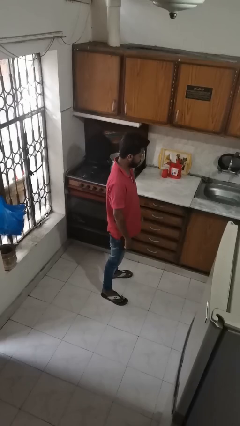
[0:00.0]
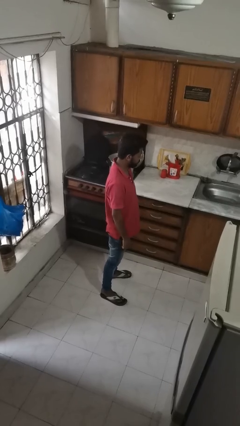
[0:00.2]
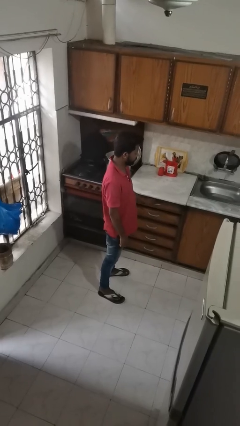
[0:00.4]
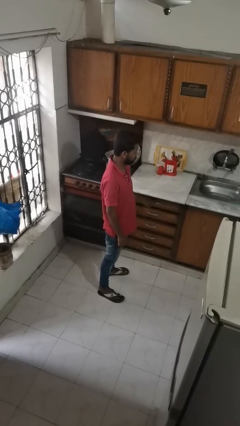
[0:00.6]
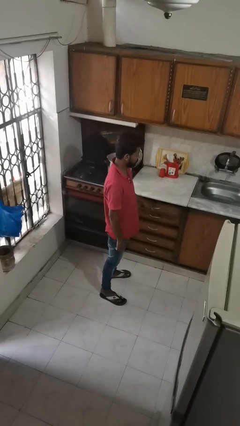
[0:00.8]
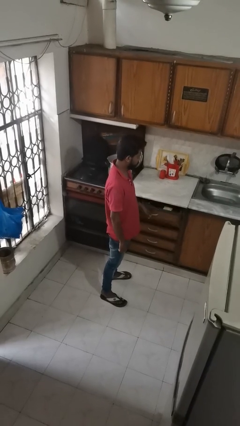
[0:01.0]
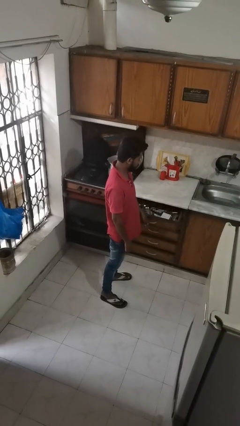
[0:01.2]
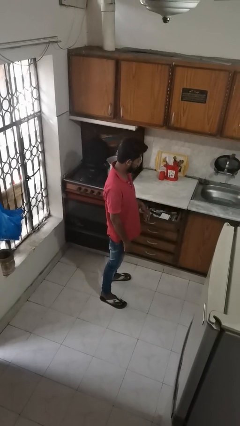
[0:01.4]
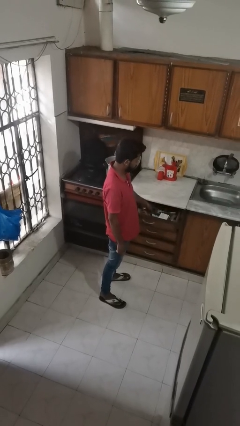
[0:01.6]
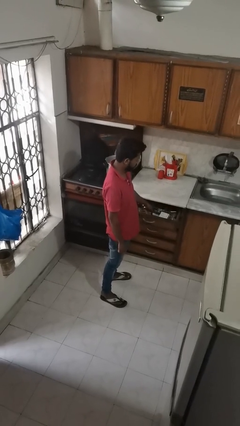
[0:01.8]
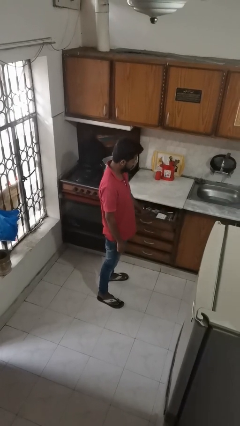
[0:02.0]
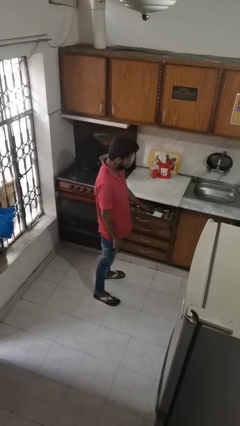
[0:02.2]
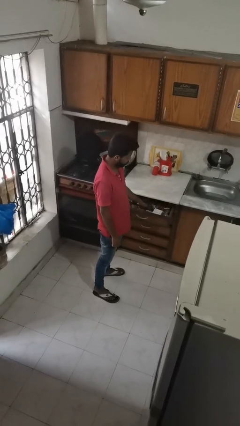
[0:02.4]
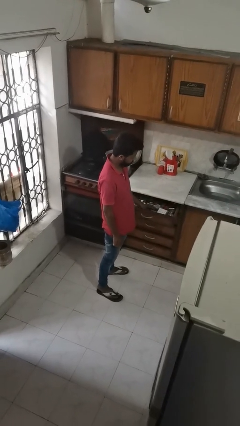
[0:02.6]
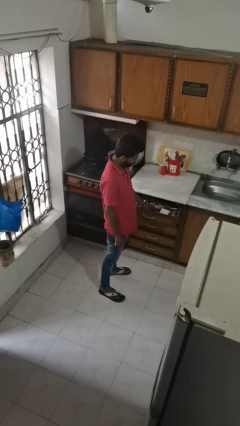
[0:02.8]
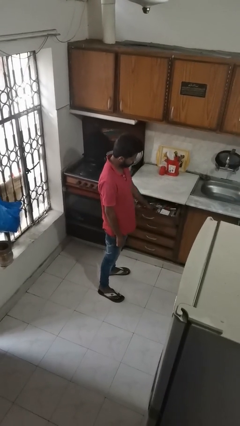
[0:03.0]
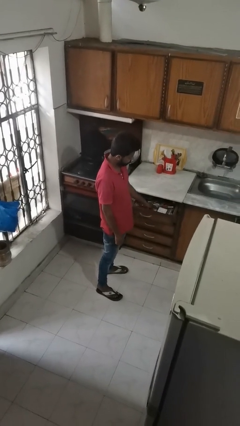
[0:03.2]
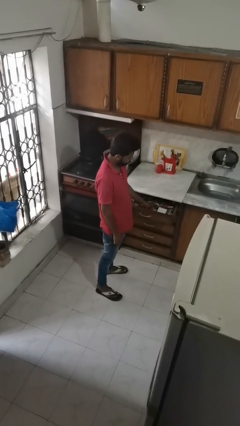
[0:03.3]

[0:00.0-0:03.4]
person searches in kitchen drawer

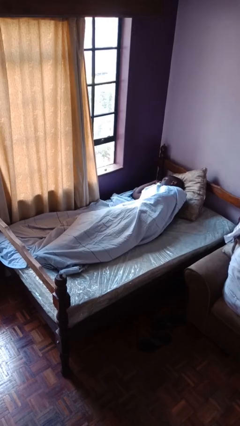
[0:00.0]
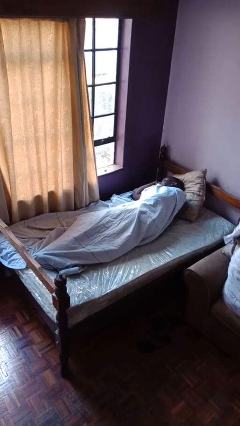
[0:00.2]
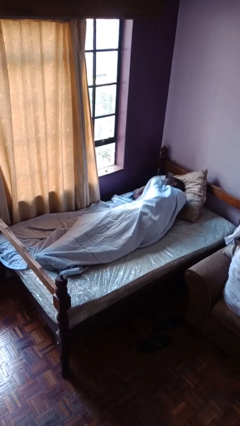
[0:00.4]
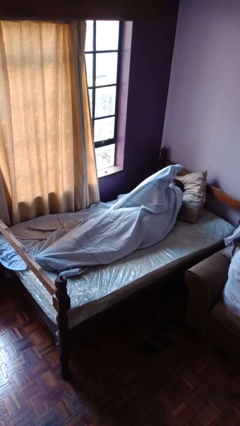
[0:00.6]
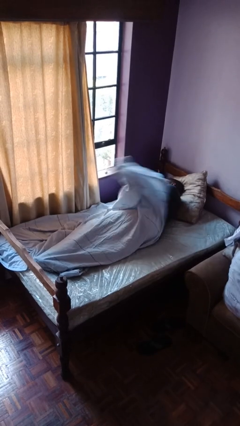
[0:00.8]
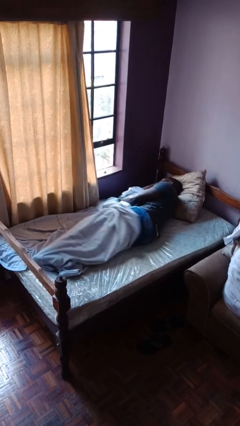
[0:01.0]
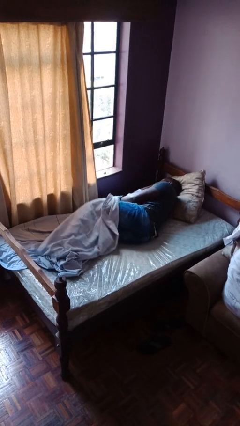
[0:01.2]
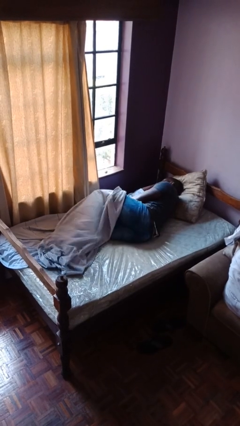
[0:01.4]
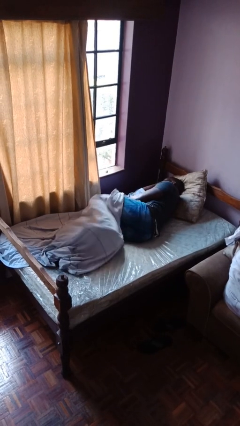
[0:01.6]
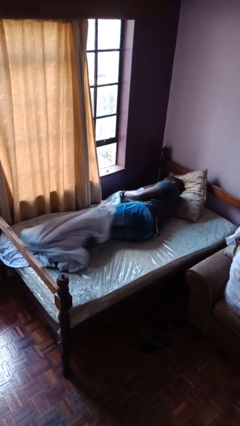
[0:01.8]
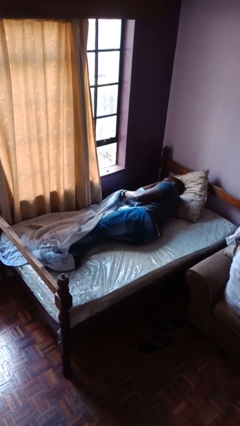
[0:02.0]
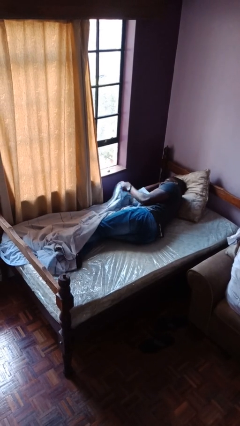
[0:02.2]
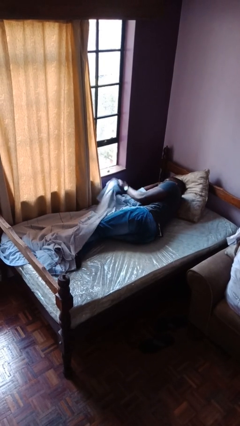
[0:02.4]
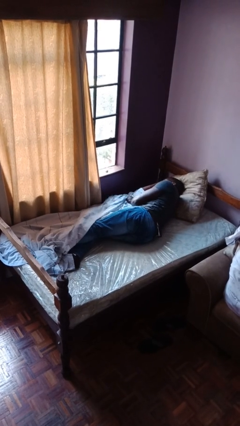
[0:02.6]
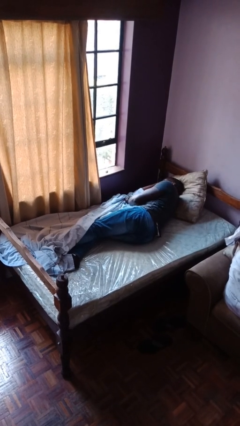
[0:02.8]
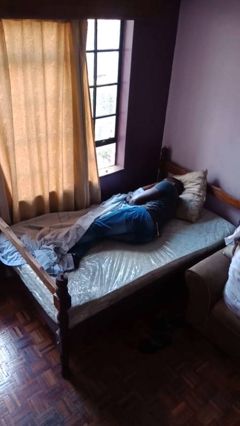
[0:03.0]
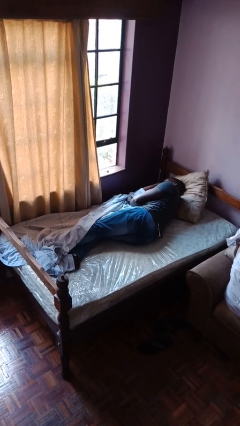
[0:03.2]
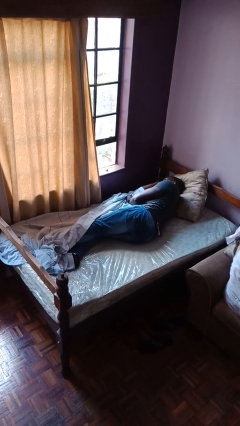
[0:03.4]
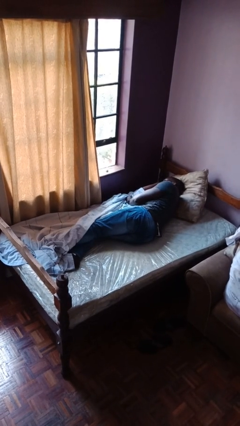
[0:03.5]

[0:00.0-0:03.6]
person uncovers with bedsheets

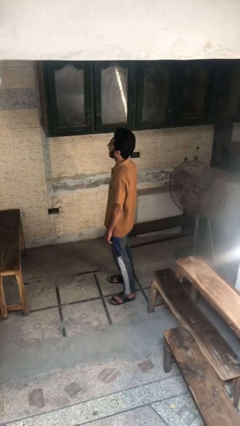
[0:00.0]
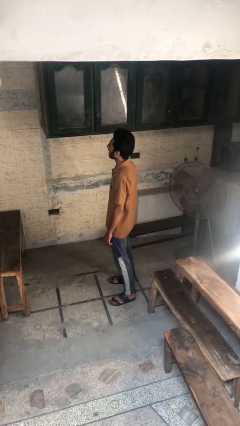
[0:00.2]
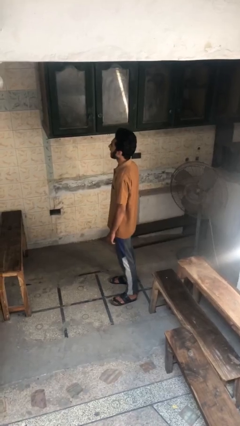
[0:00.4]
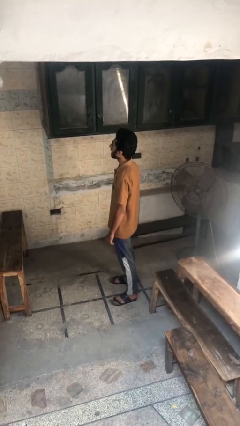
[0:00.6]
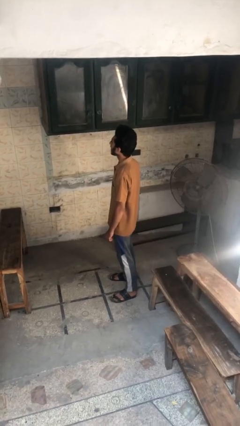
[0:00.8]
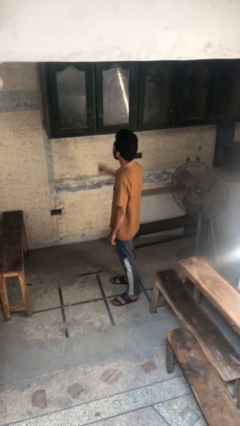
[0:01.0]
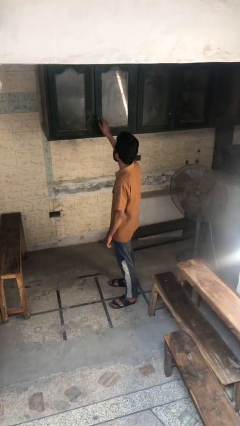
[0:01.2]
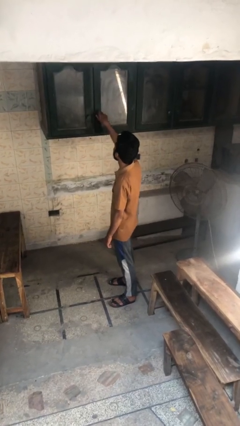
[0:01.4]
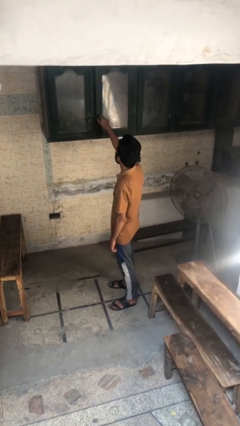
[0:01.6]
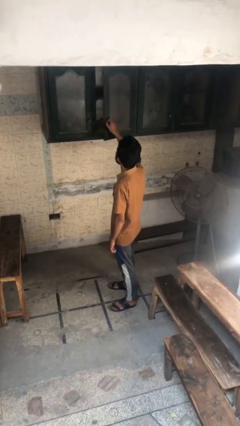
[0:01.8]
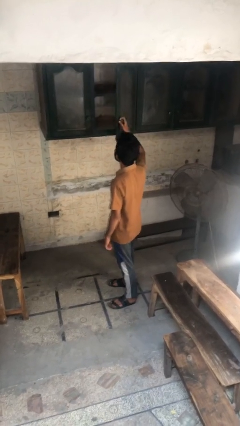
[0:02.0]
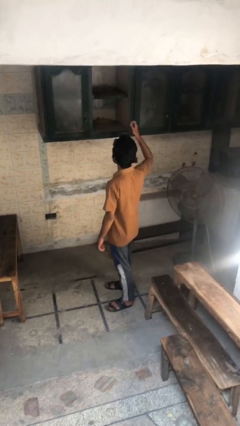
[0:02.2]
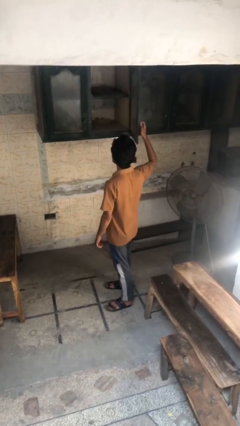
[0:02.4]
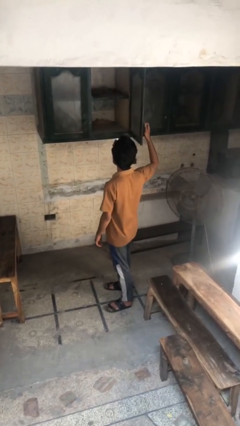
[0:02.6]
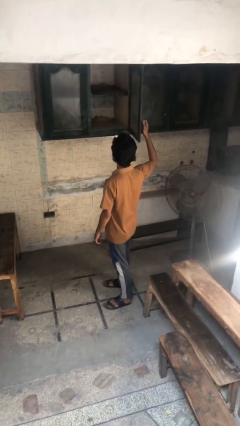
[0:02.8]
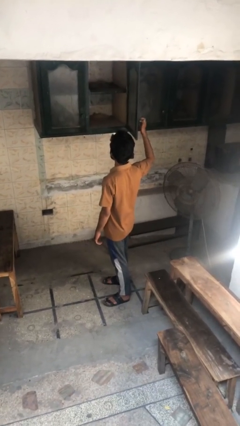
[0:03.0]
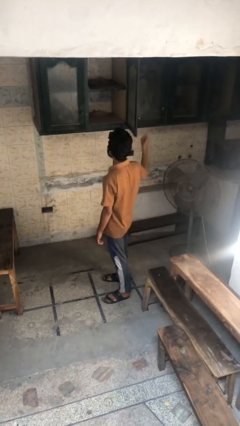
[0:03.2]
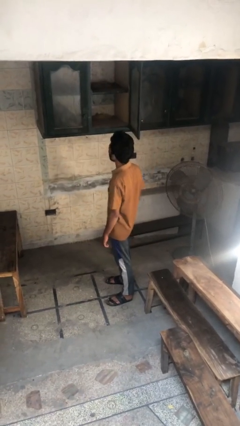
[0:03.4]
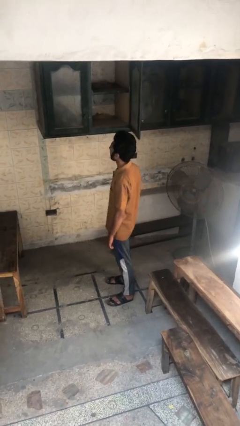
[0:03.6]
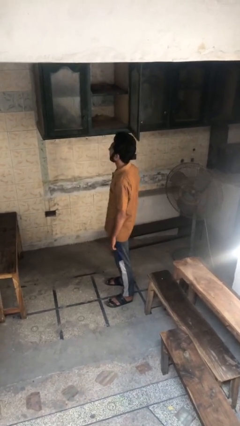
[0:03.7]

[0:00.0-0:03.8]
person opens cabinet

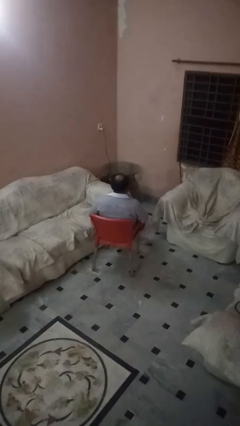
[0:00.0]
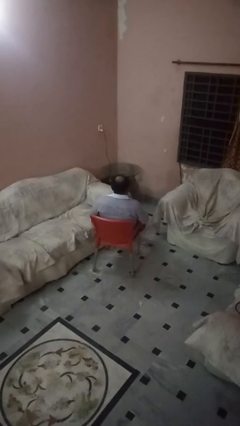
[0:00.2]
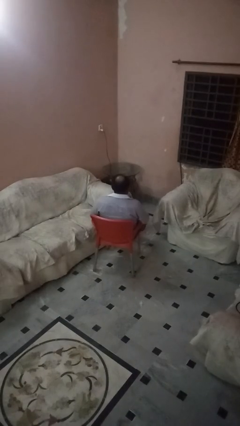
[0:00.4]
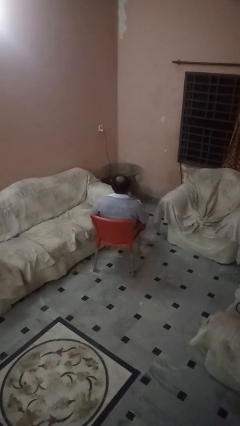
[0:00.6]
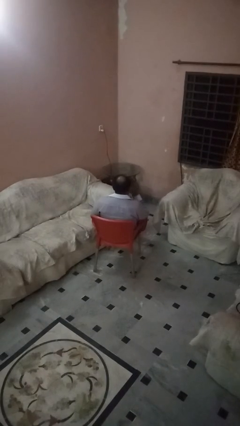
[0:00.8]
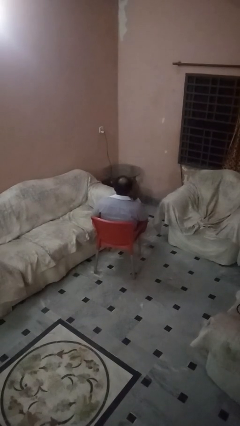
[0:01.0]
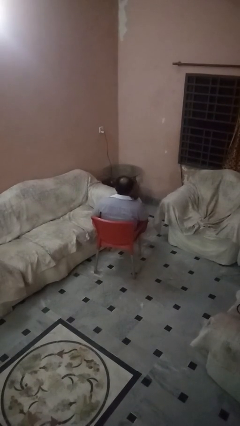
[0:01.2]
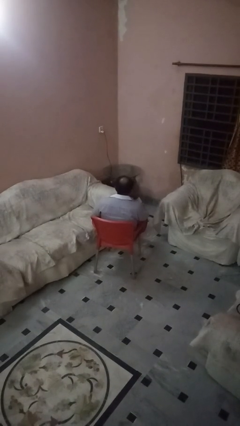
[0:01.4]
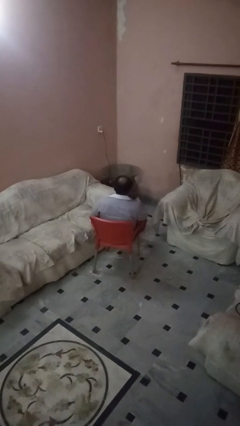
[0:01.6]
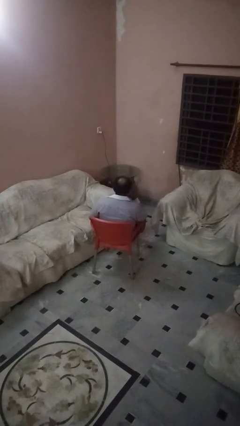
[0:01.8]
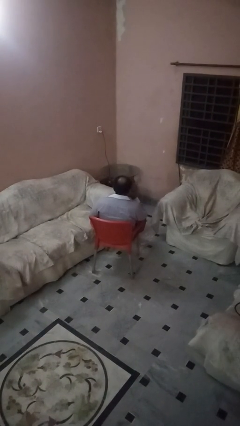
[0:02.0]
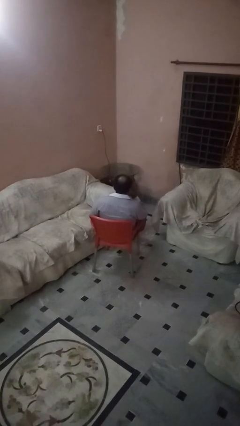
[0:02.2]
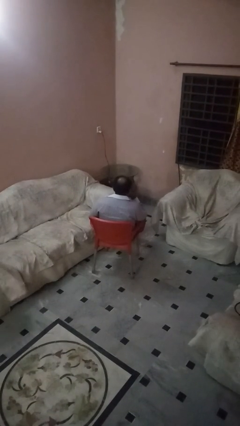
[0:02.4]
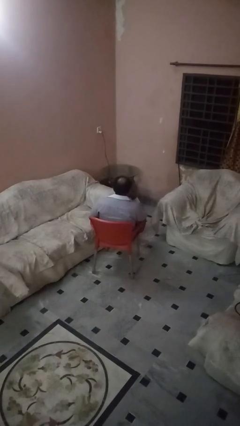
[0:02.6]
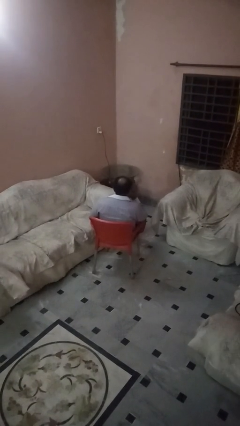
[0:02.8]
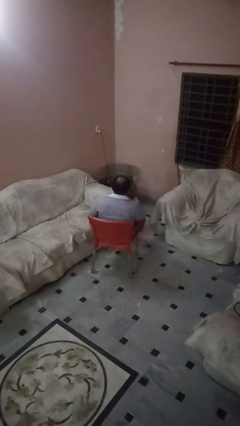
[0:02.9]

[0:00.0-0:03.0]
person strokes chin

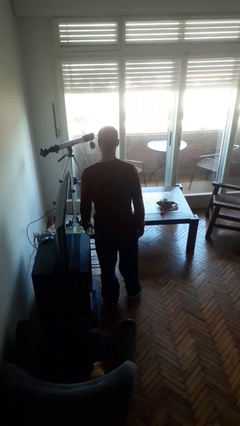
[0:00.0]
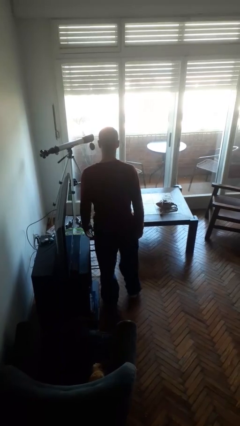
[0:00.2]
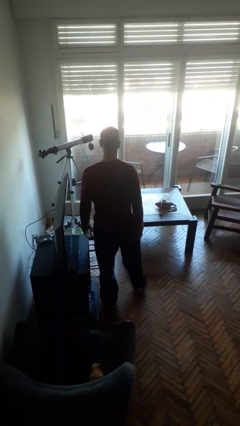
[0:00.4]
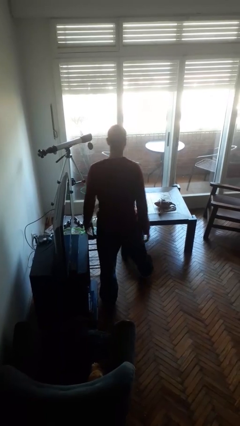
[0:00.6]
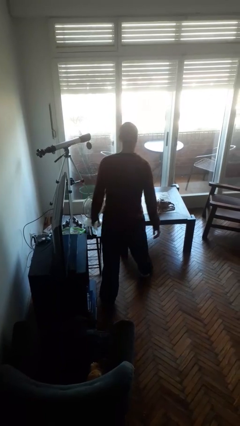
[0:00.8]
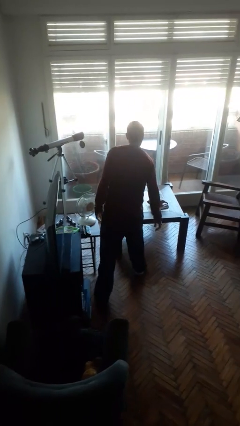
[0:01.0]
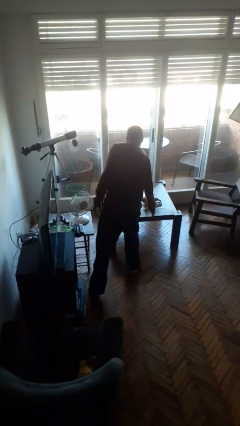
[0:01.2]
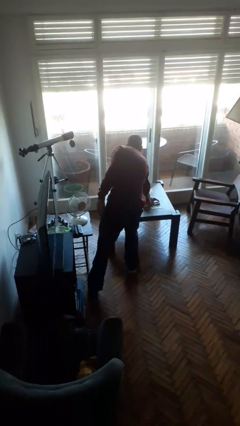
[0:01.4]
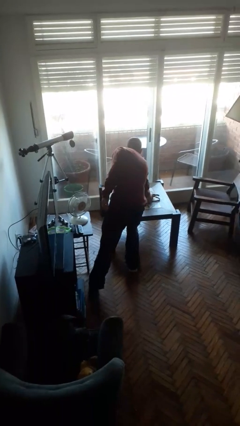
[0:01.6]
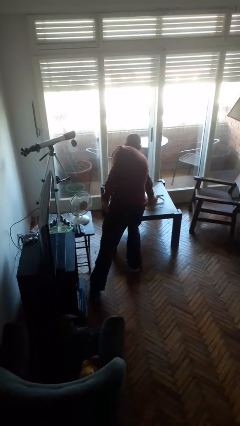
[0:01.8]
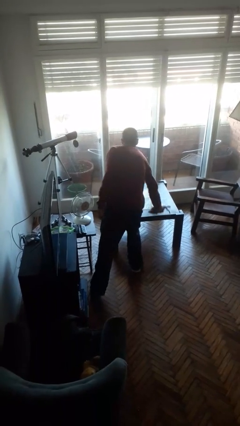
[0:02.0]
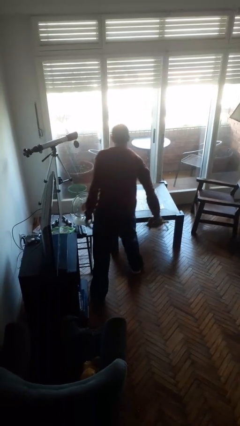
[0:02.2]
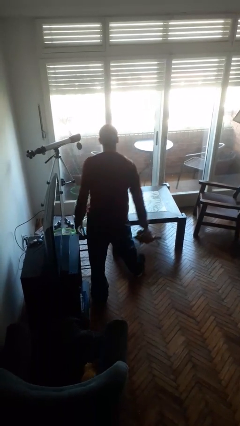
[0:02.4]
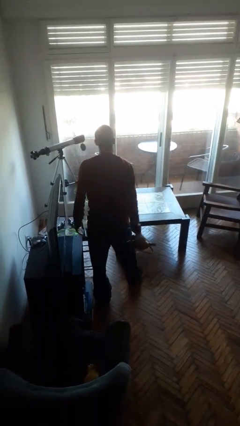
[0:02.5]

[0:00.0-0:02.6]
person picks up object from table

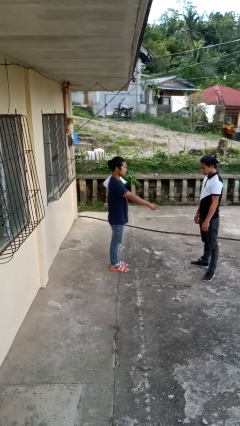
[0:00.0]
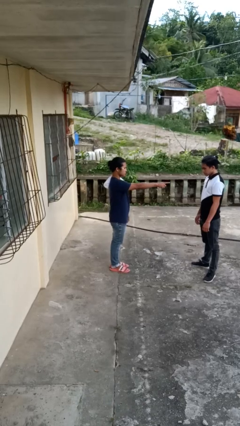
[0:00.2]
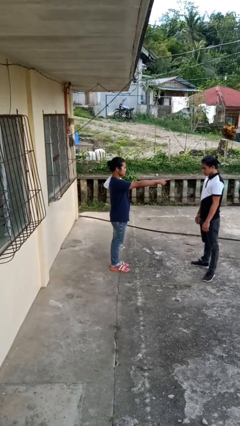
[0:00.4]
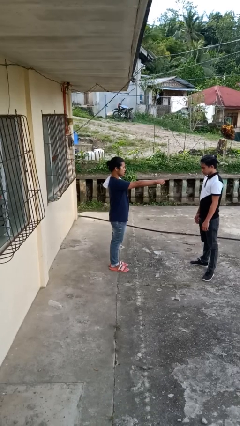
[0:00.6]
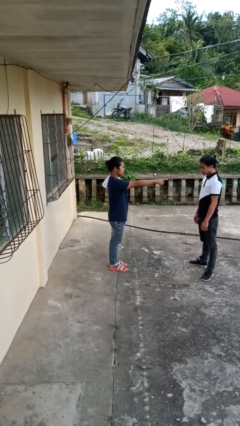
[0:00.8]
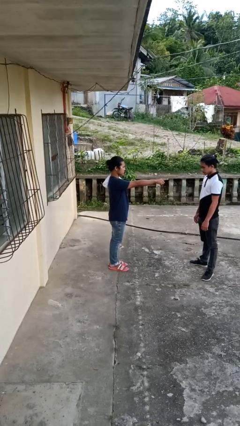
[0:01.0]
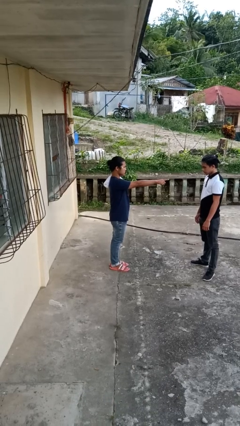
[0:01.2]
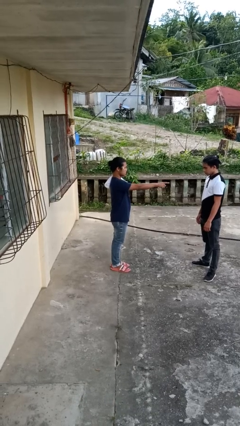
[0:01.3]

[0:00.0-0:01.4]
person points at person
